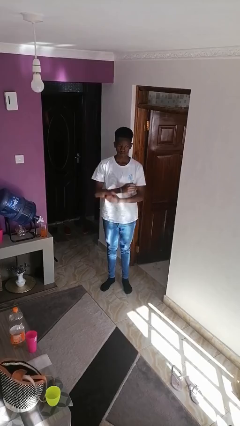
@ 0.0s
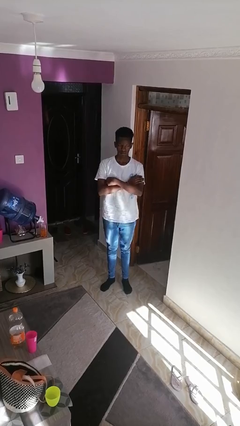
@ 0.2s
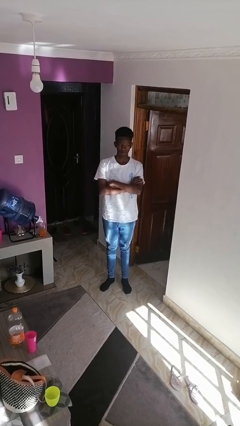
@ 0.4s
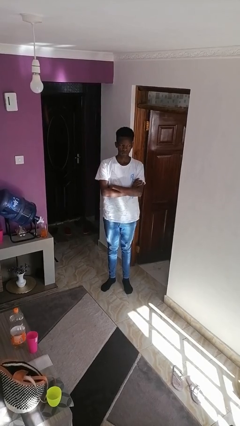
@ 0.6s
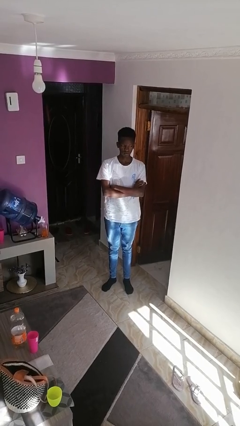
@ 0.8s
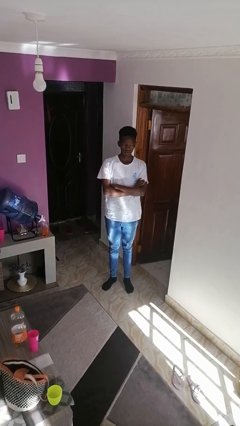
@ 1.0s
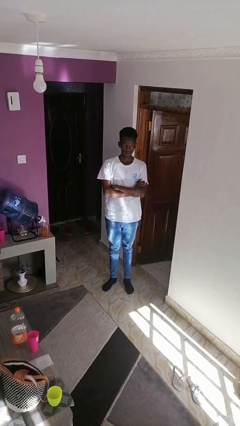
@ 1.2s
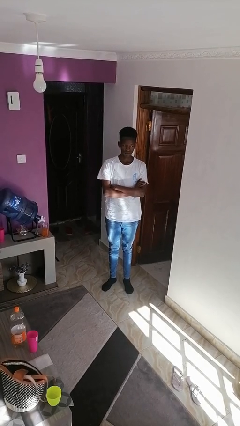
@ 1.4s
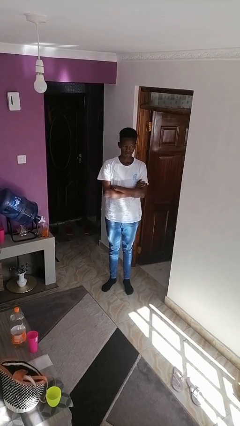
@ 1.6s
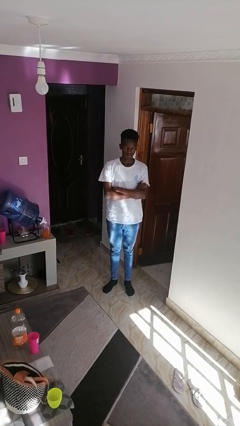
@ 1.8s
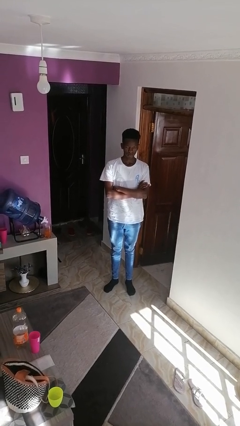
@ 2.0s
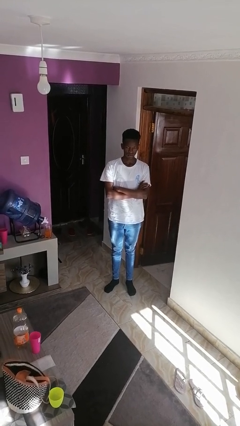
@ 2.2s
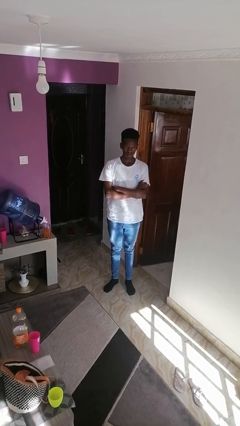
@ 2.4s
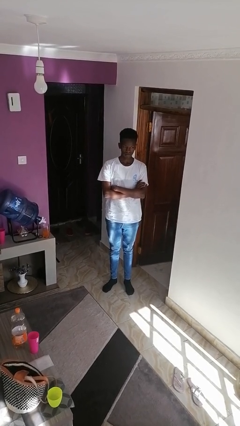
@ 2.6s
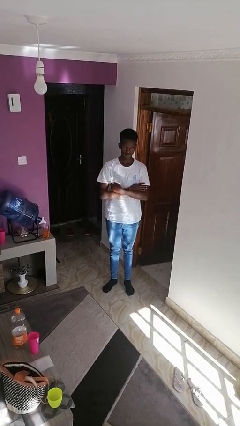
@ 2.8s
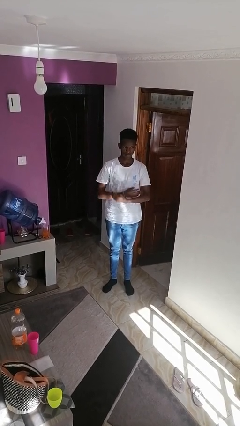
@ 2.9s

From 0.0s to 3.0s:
person crosses arms

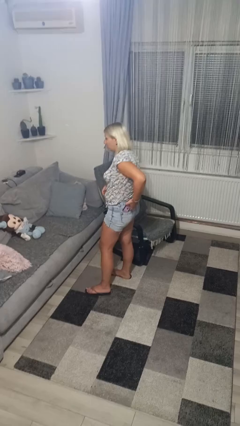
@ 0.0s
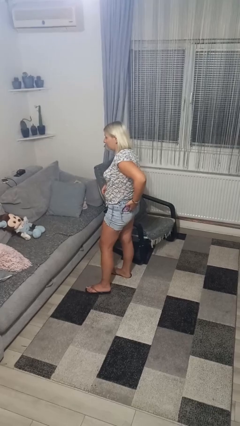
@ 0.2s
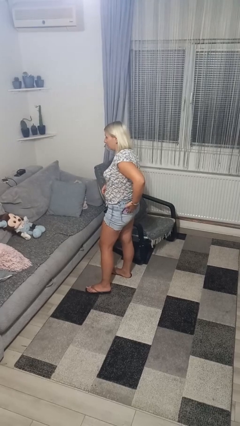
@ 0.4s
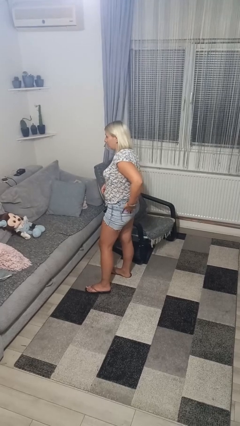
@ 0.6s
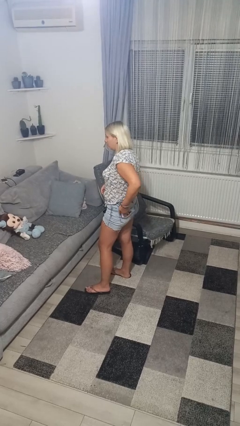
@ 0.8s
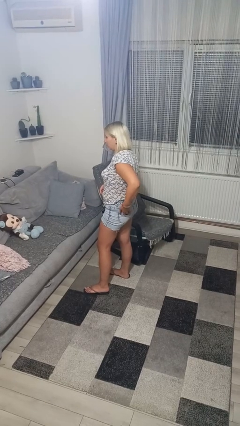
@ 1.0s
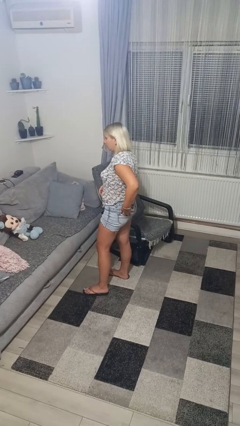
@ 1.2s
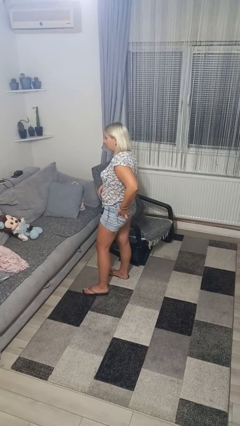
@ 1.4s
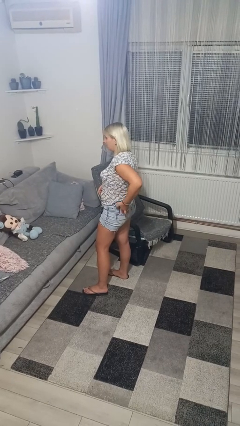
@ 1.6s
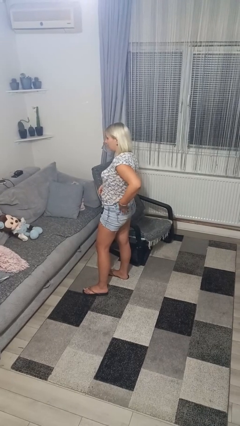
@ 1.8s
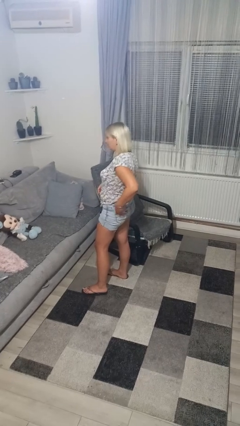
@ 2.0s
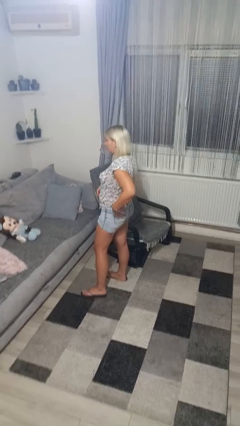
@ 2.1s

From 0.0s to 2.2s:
person puts phone into pocket

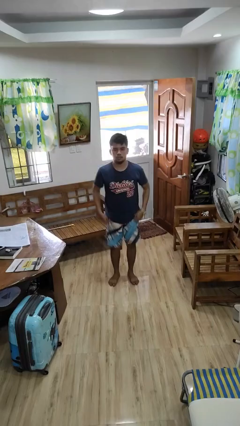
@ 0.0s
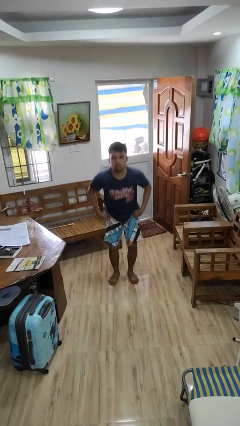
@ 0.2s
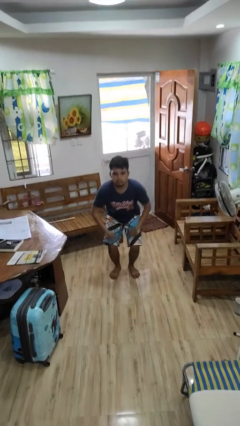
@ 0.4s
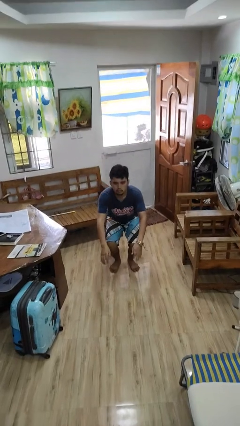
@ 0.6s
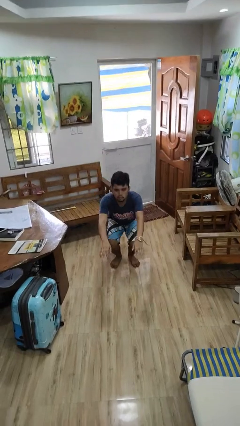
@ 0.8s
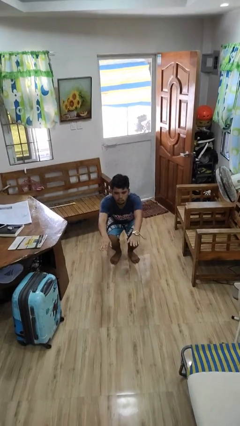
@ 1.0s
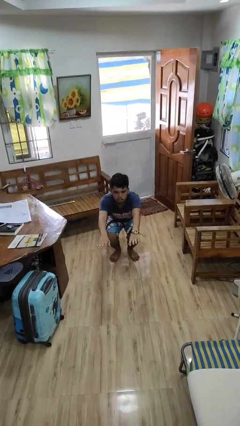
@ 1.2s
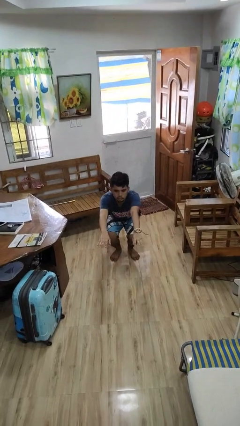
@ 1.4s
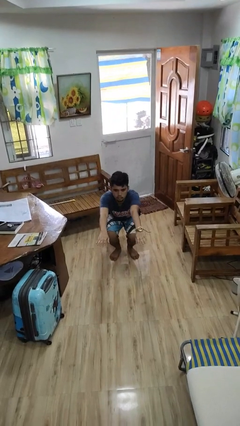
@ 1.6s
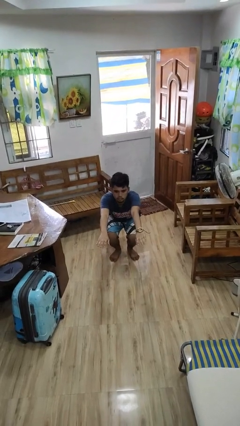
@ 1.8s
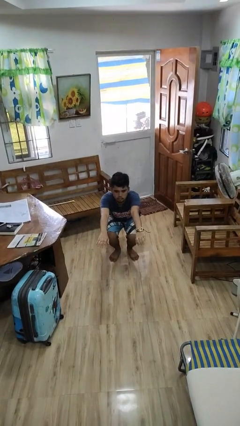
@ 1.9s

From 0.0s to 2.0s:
person squats

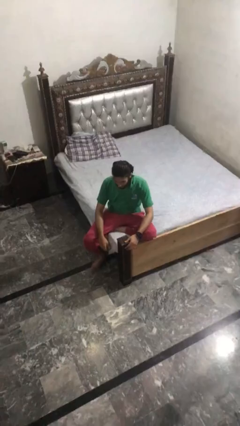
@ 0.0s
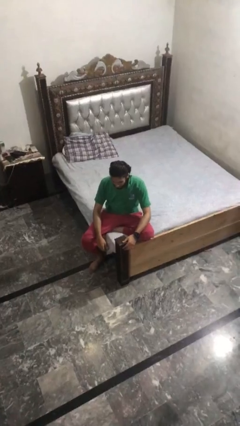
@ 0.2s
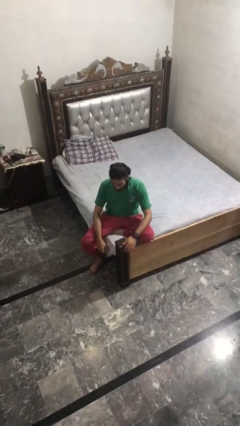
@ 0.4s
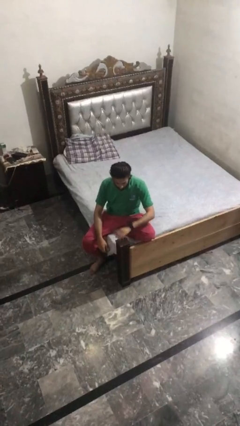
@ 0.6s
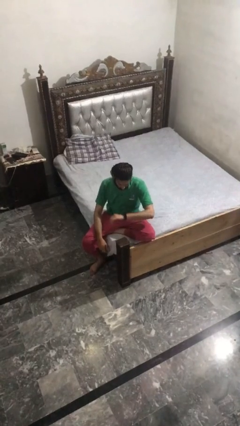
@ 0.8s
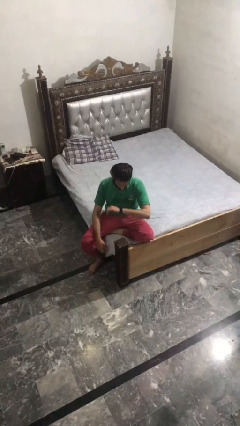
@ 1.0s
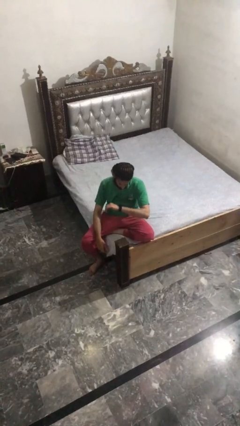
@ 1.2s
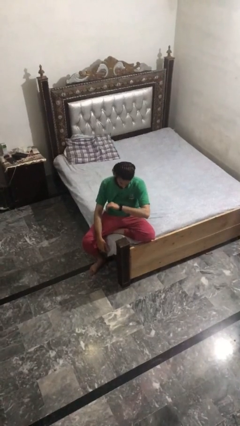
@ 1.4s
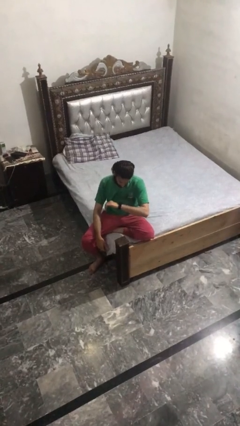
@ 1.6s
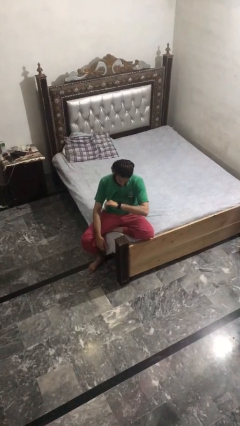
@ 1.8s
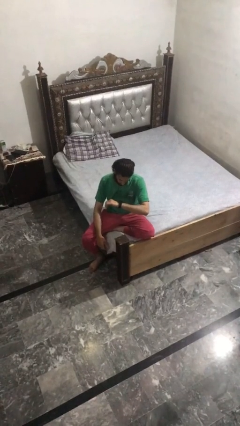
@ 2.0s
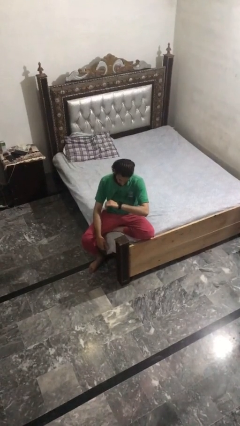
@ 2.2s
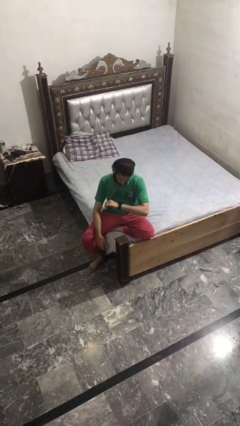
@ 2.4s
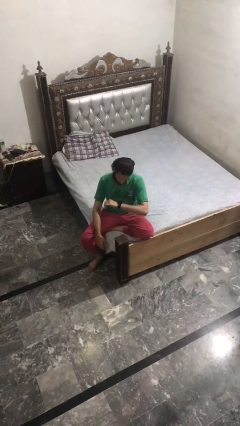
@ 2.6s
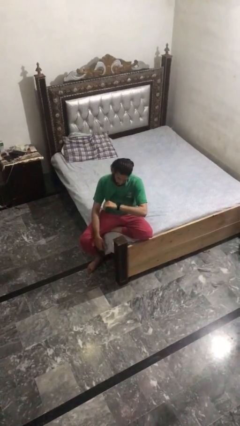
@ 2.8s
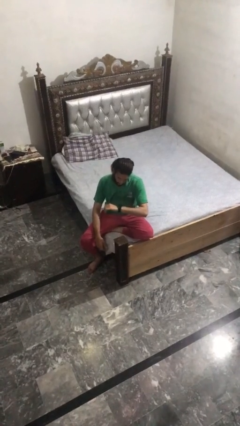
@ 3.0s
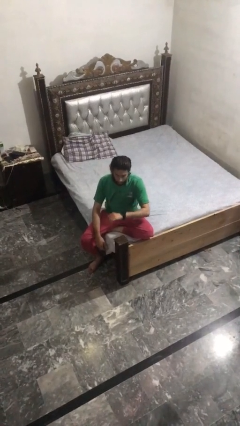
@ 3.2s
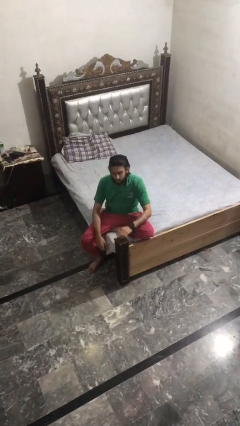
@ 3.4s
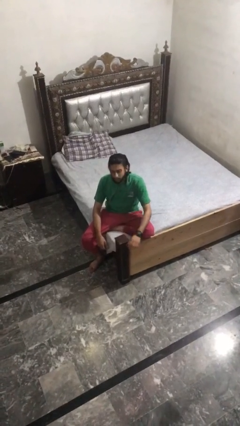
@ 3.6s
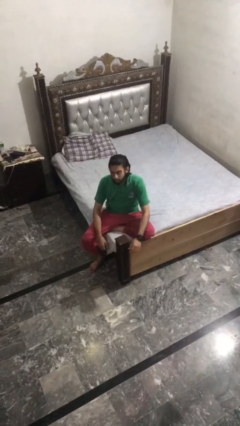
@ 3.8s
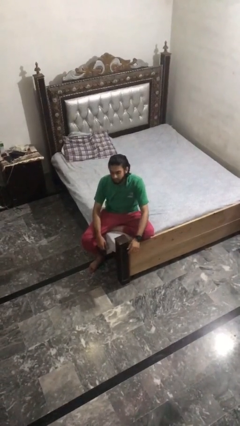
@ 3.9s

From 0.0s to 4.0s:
person looks at wristwatch

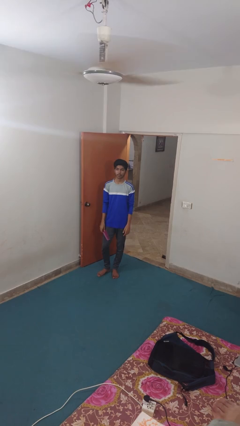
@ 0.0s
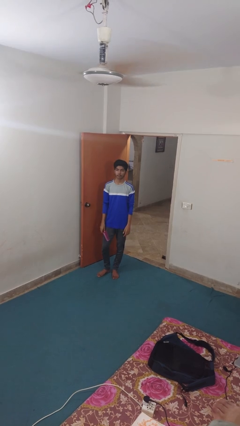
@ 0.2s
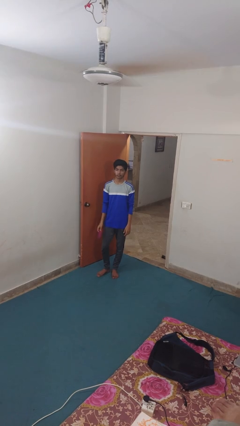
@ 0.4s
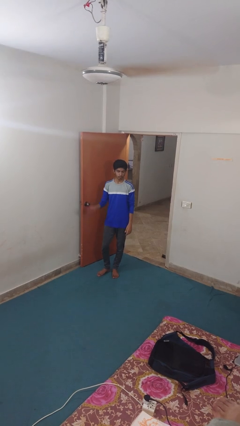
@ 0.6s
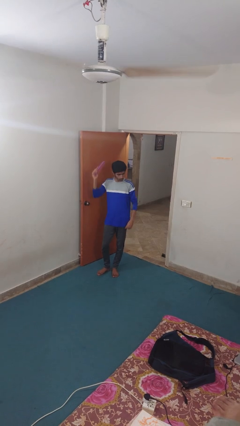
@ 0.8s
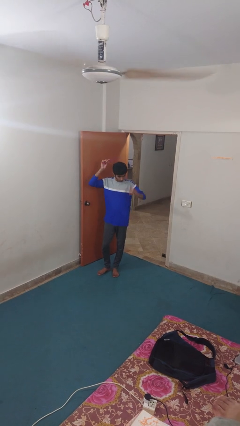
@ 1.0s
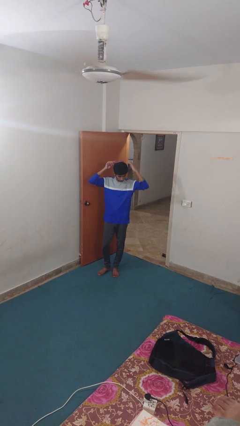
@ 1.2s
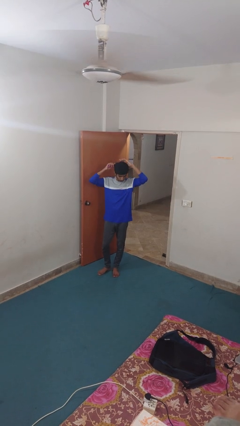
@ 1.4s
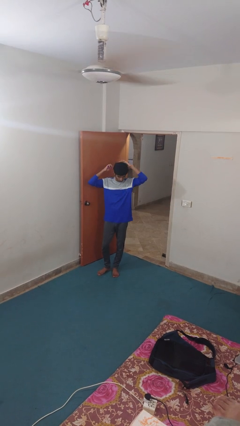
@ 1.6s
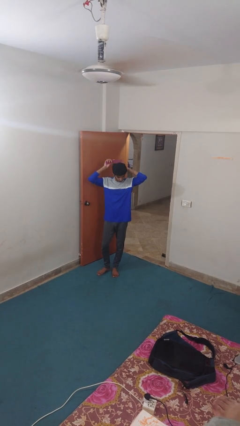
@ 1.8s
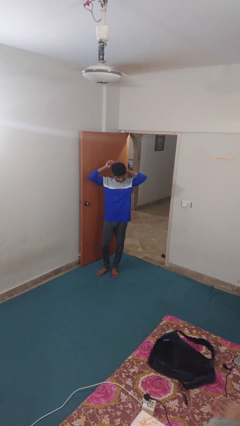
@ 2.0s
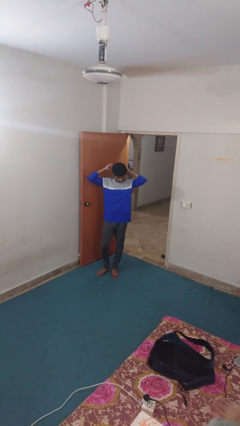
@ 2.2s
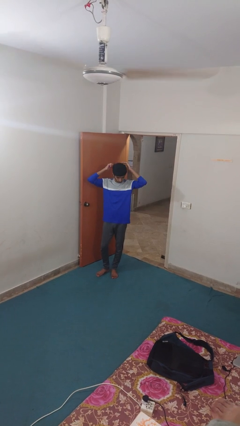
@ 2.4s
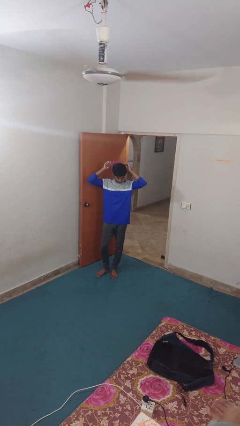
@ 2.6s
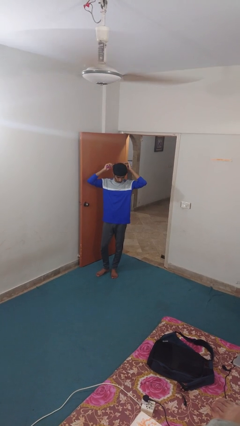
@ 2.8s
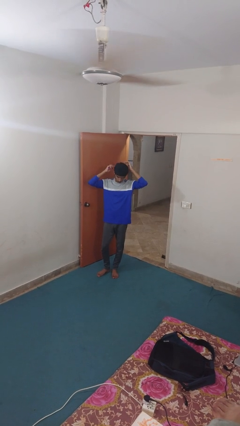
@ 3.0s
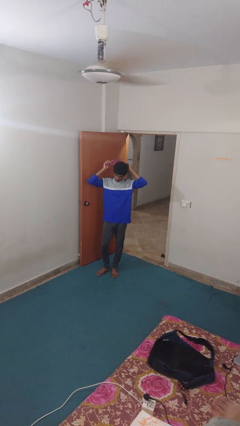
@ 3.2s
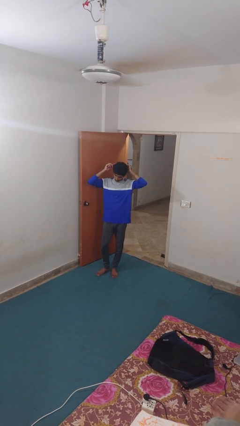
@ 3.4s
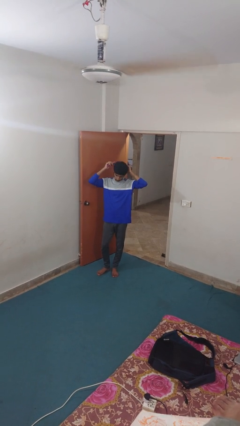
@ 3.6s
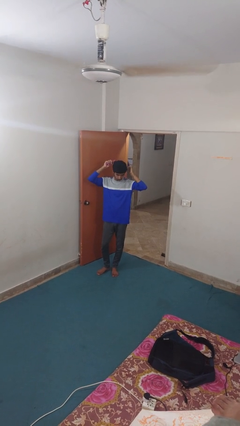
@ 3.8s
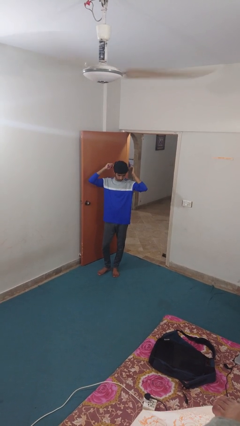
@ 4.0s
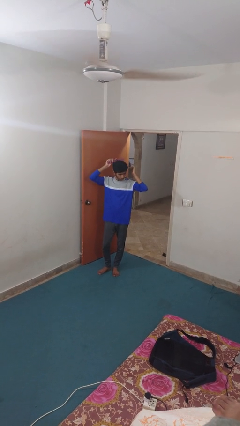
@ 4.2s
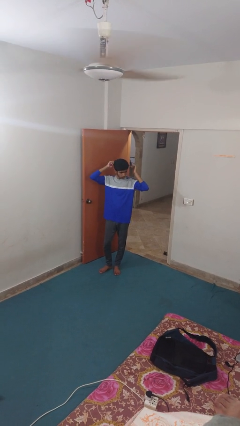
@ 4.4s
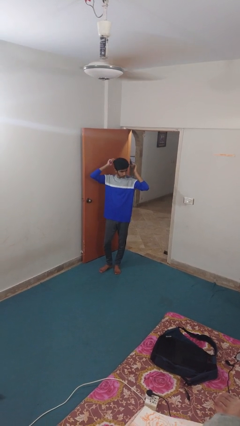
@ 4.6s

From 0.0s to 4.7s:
person brushes hair

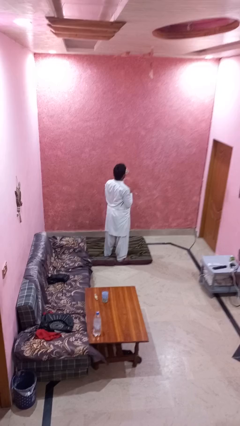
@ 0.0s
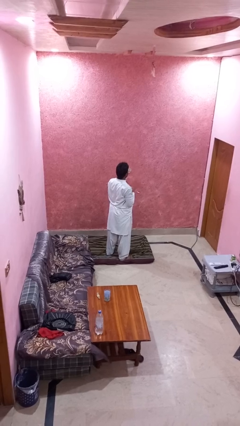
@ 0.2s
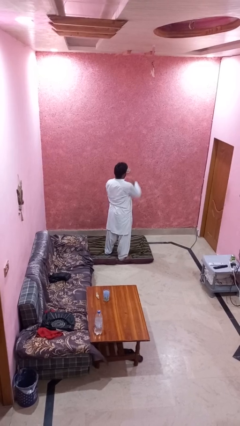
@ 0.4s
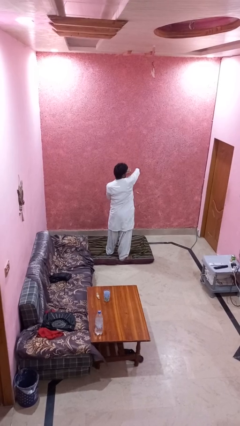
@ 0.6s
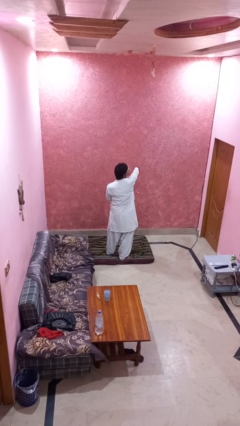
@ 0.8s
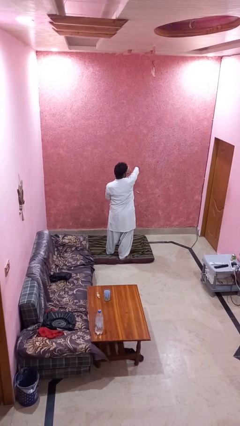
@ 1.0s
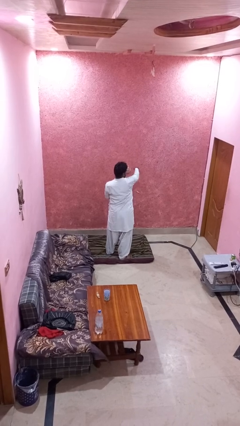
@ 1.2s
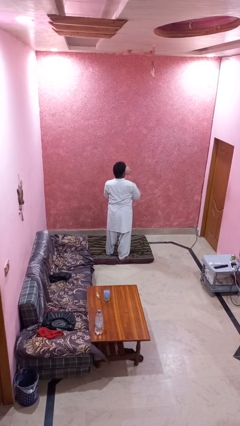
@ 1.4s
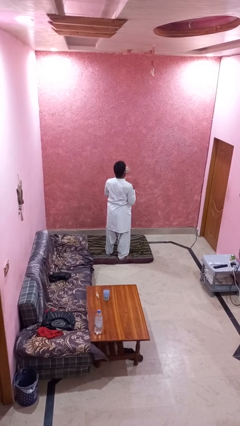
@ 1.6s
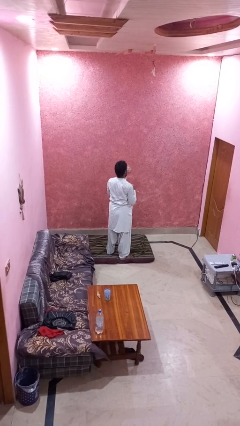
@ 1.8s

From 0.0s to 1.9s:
person punches
